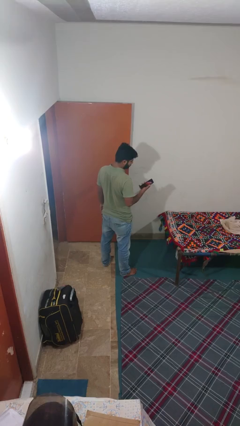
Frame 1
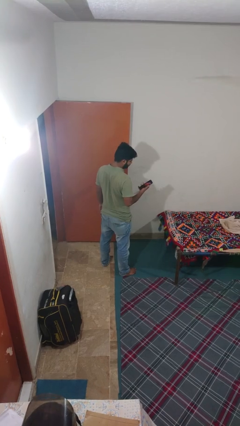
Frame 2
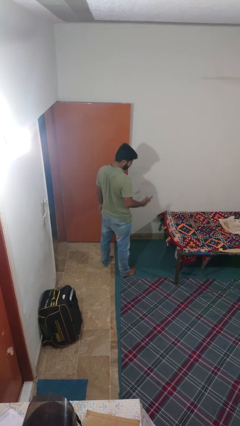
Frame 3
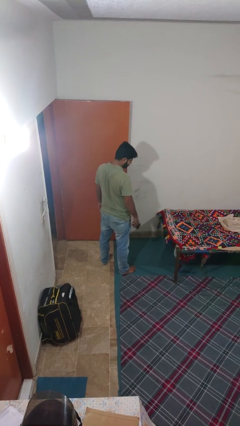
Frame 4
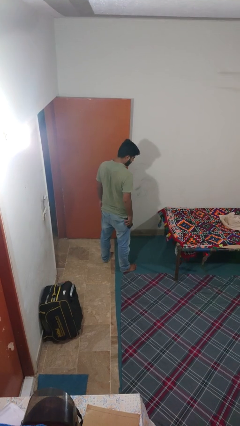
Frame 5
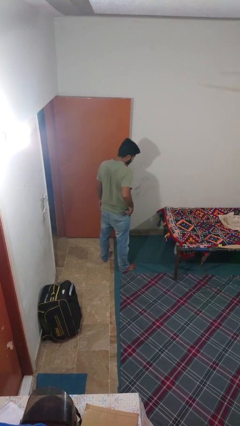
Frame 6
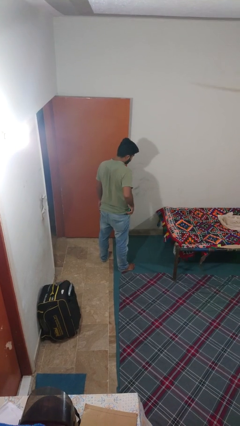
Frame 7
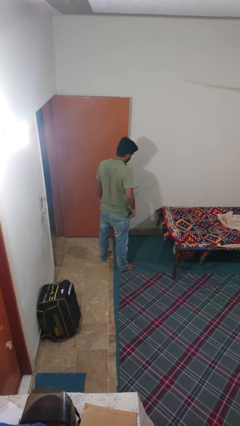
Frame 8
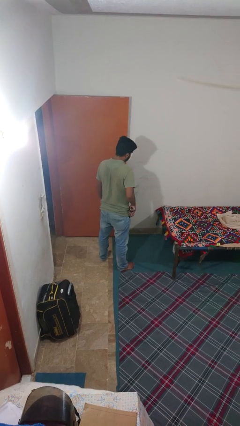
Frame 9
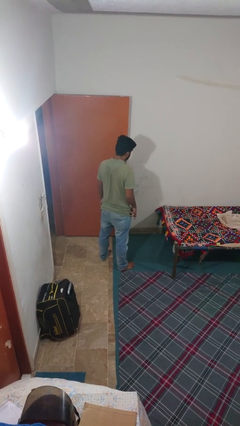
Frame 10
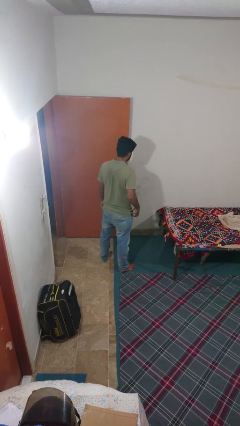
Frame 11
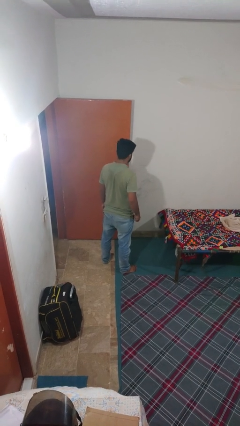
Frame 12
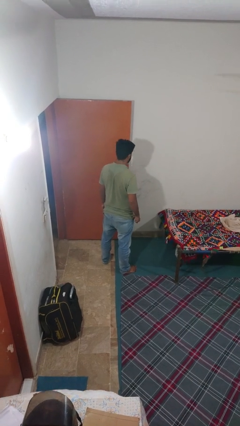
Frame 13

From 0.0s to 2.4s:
person puts phone into pocket

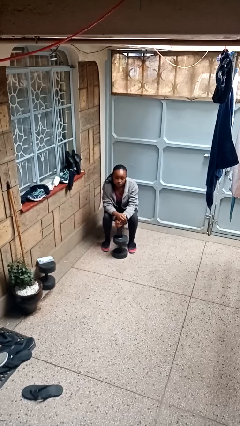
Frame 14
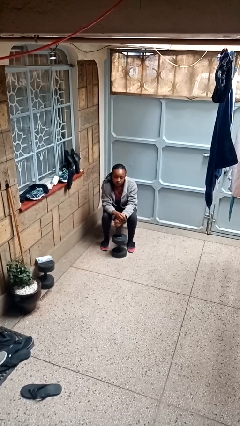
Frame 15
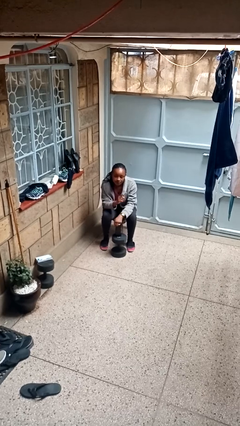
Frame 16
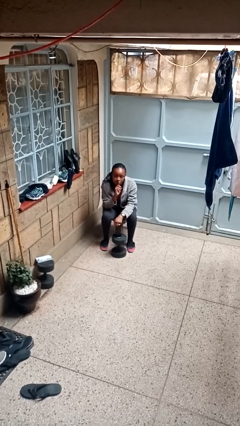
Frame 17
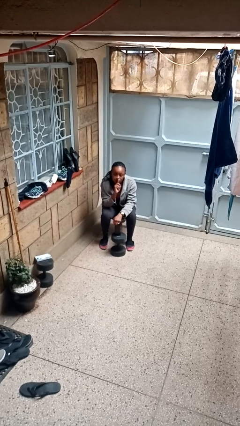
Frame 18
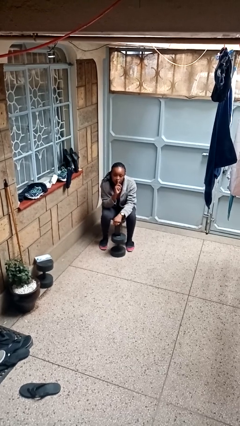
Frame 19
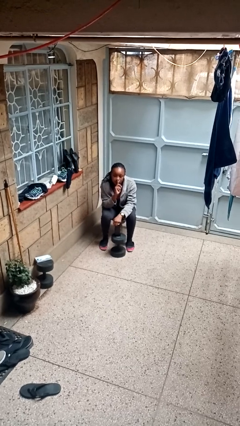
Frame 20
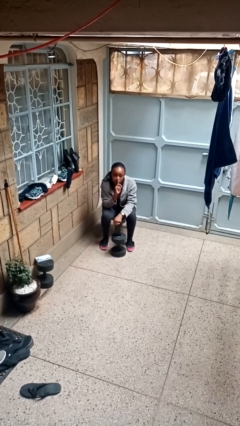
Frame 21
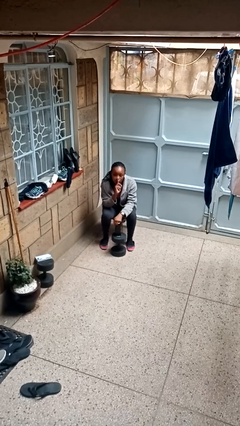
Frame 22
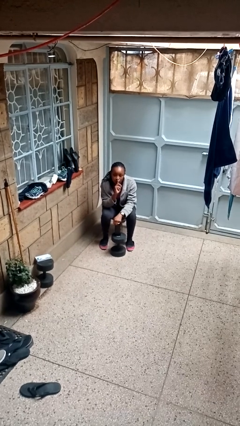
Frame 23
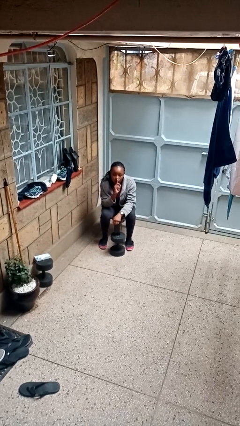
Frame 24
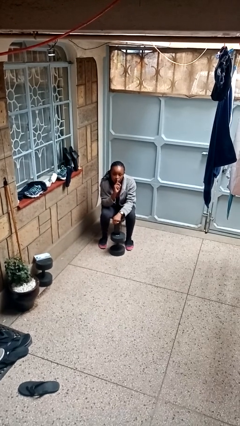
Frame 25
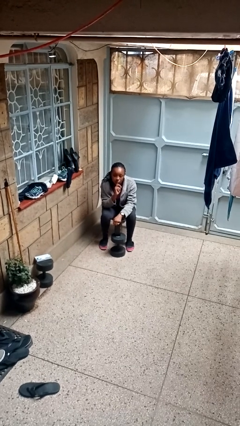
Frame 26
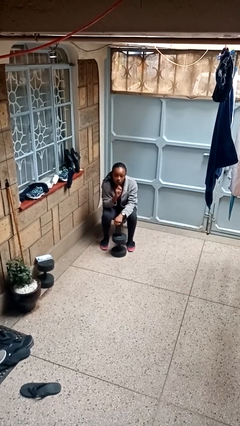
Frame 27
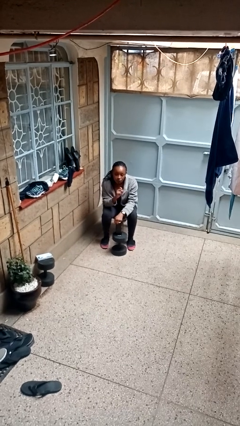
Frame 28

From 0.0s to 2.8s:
person gestures be quiet

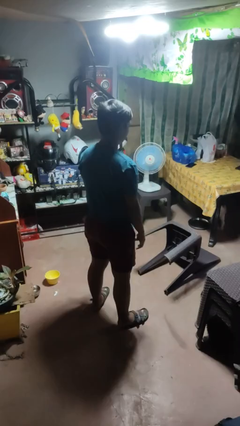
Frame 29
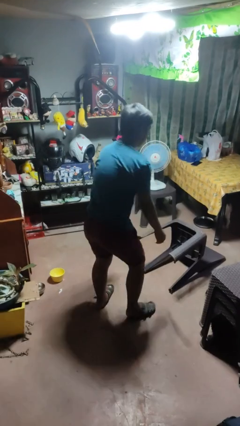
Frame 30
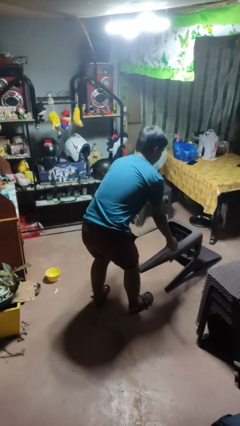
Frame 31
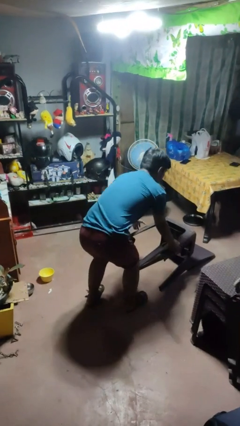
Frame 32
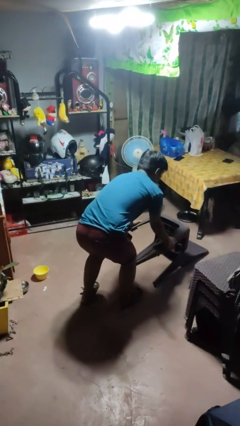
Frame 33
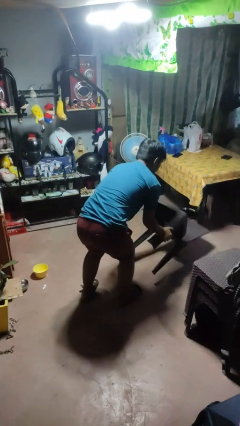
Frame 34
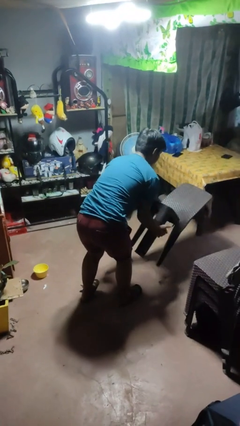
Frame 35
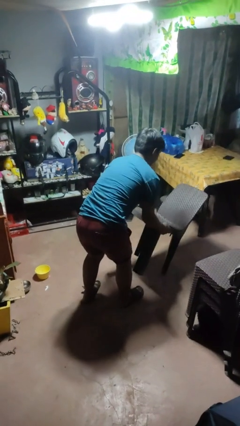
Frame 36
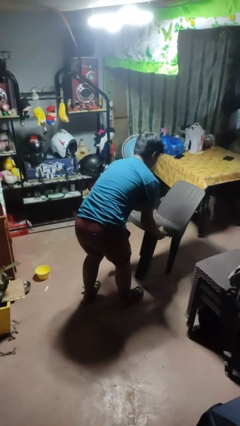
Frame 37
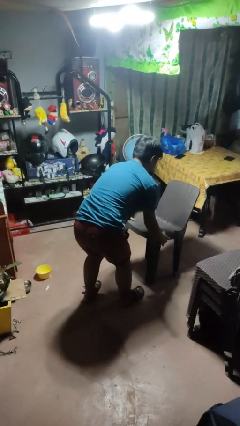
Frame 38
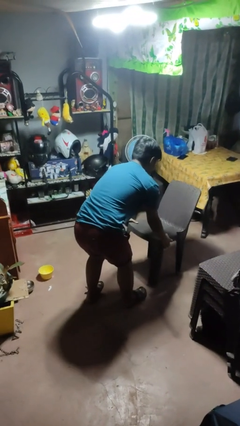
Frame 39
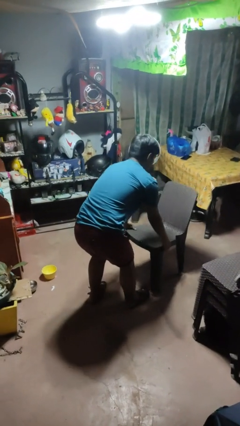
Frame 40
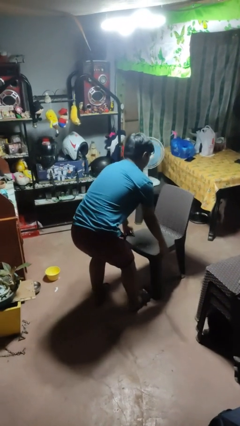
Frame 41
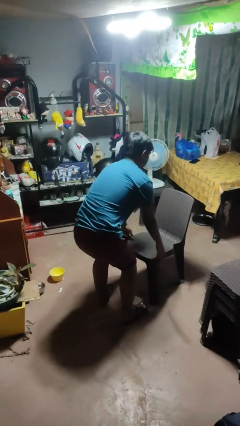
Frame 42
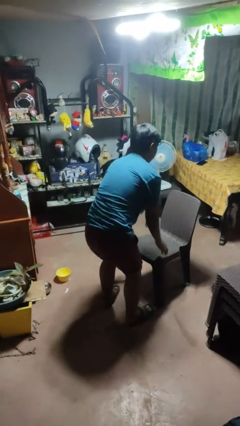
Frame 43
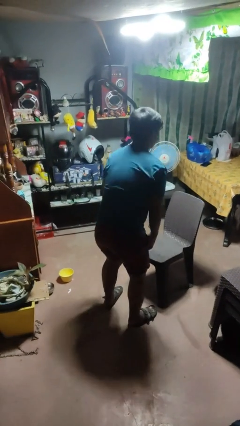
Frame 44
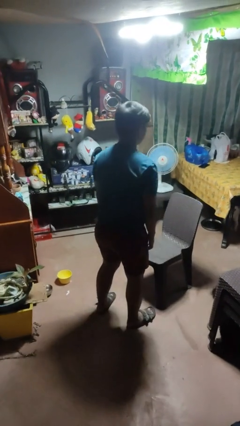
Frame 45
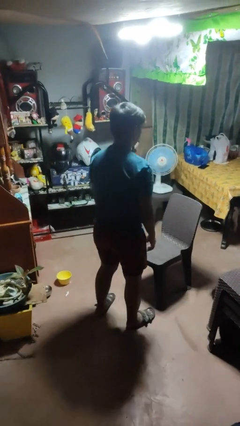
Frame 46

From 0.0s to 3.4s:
person sets upright furniture

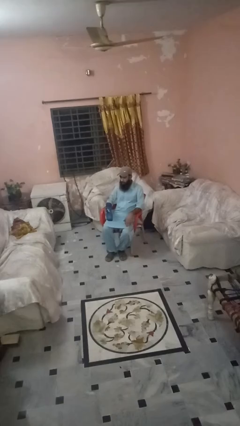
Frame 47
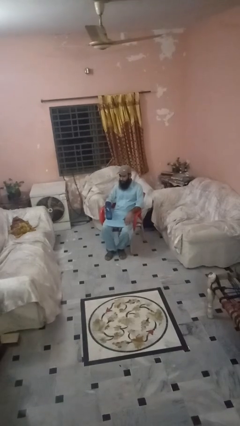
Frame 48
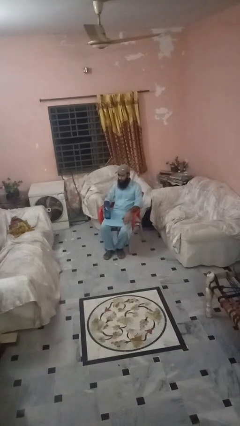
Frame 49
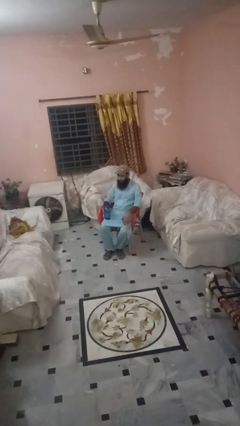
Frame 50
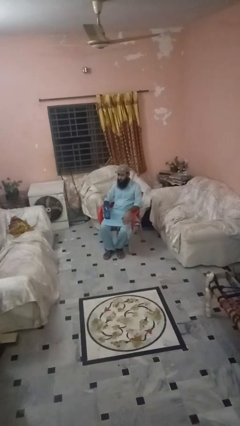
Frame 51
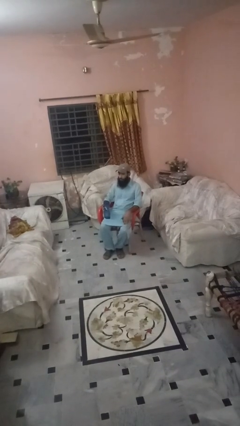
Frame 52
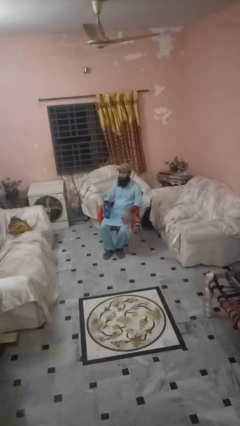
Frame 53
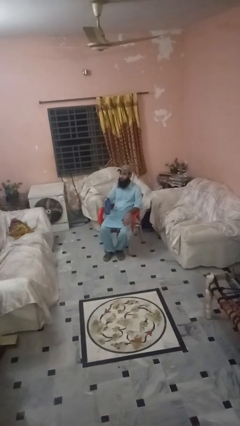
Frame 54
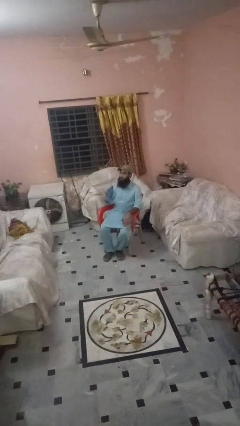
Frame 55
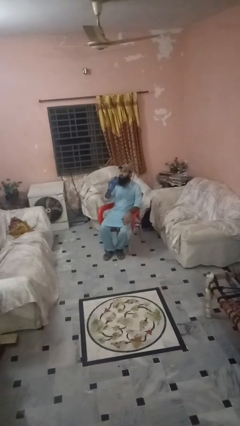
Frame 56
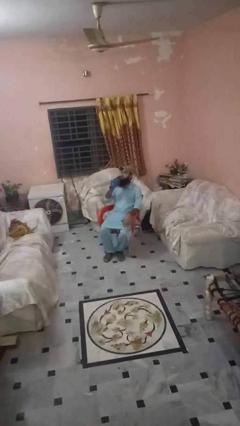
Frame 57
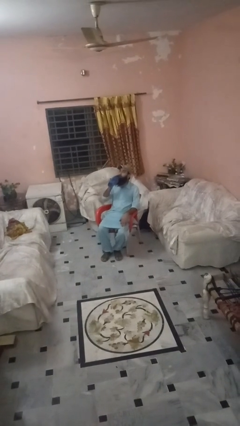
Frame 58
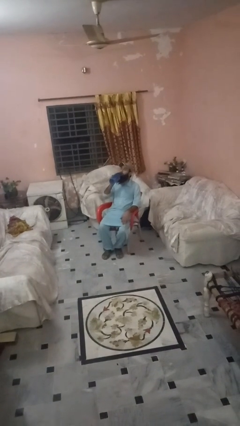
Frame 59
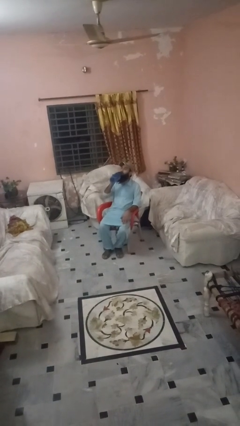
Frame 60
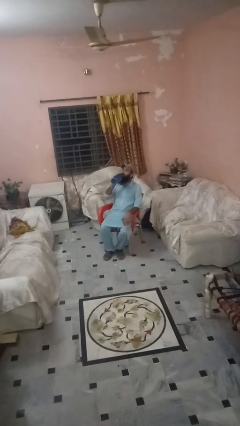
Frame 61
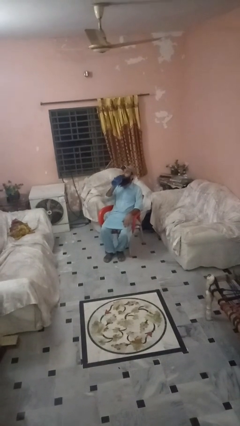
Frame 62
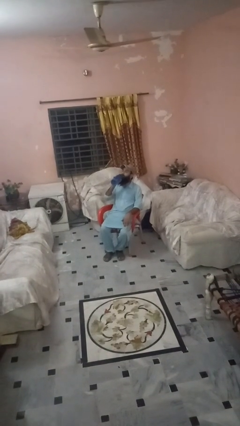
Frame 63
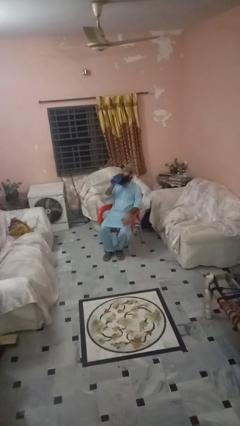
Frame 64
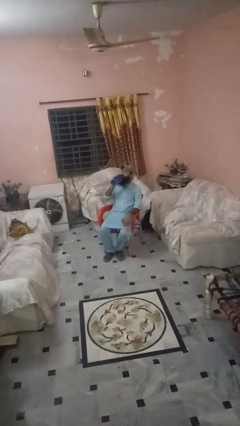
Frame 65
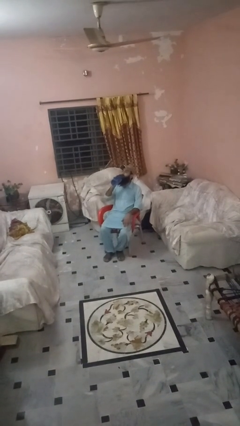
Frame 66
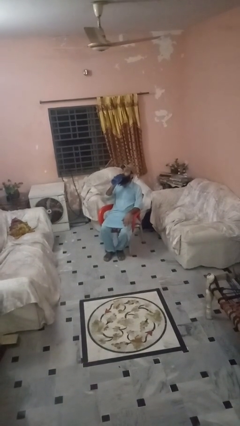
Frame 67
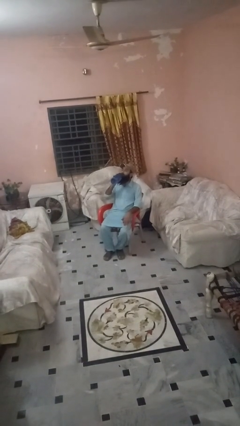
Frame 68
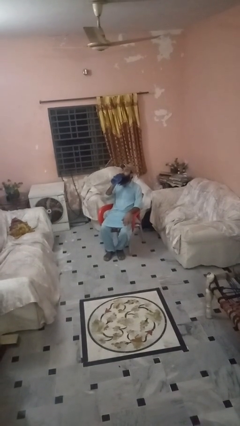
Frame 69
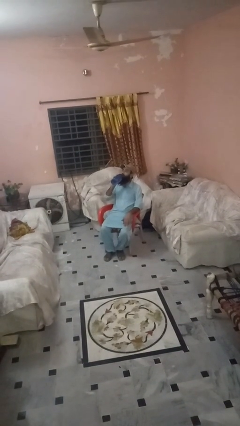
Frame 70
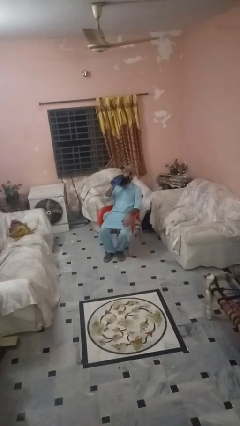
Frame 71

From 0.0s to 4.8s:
person drinks from bottle

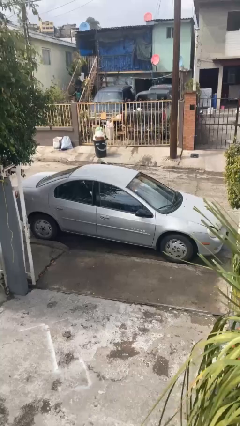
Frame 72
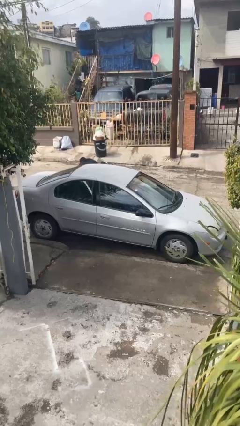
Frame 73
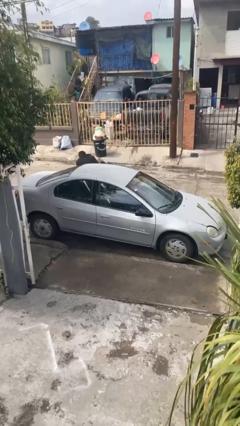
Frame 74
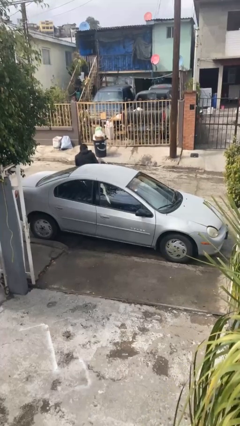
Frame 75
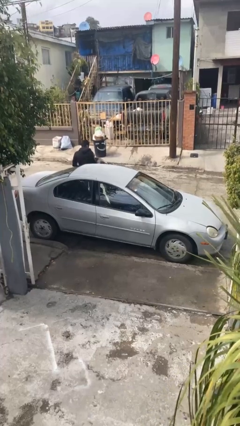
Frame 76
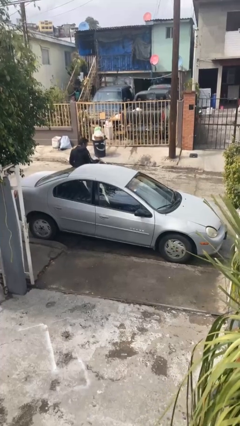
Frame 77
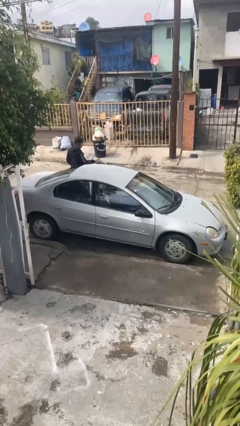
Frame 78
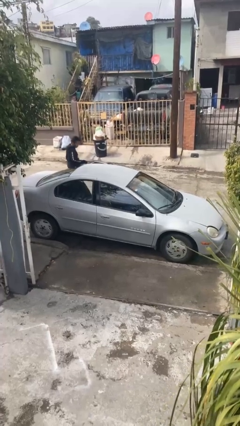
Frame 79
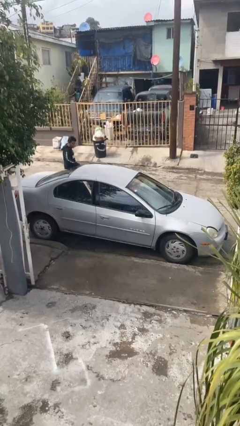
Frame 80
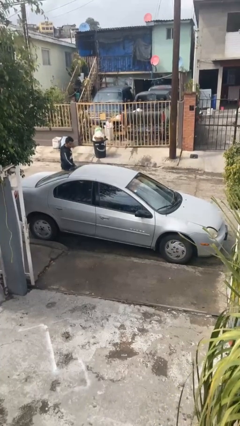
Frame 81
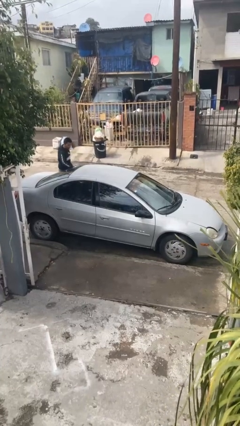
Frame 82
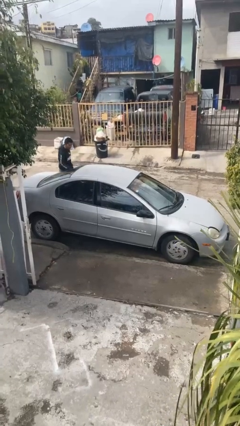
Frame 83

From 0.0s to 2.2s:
car drops off person

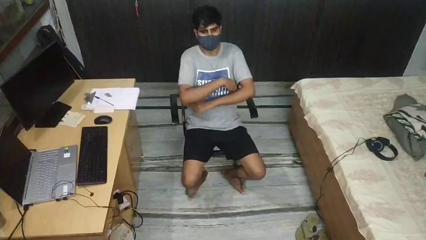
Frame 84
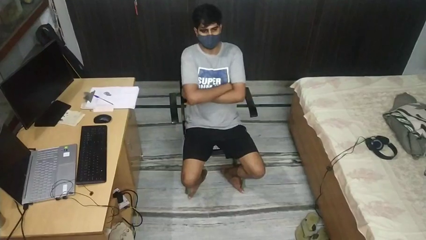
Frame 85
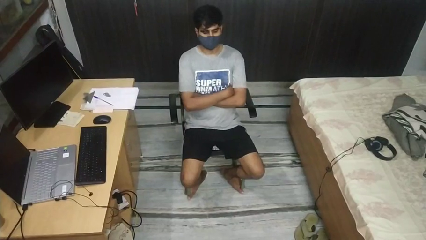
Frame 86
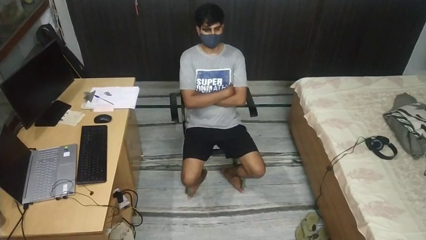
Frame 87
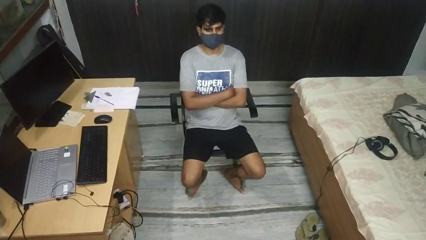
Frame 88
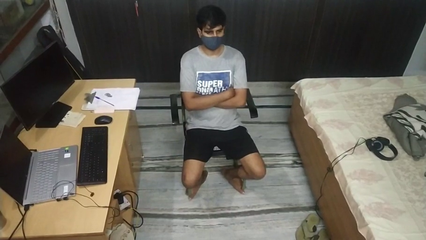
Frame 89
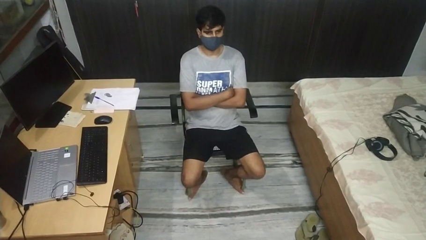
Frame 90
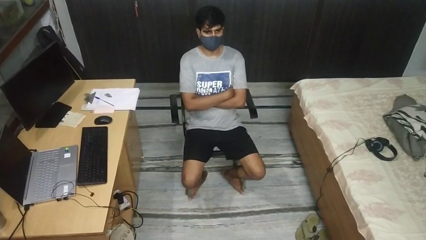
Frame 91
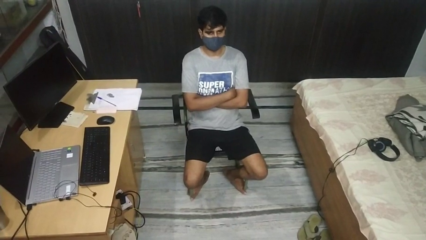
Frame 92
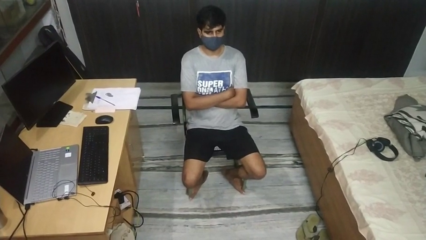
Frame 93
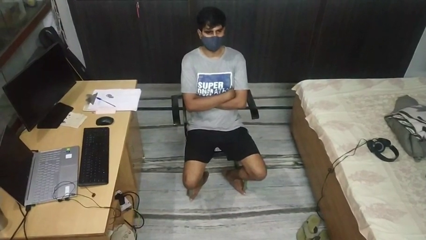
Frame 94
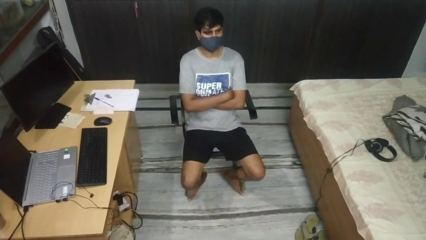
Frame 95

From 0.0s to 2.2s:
person crosses arms
